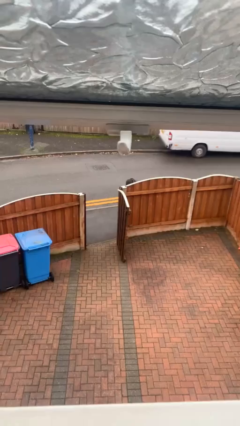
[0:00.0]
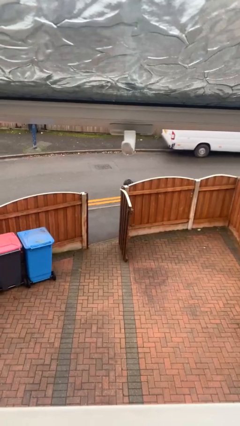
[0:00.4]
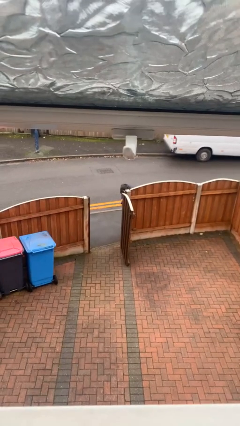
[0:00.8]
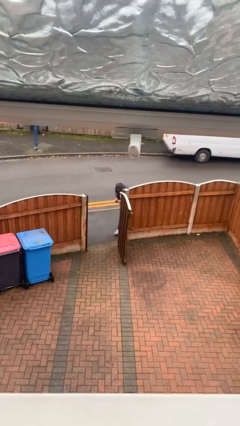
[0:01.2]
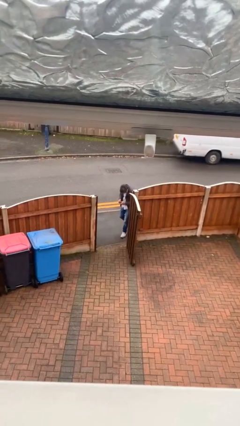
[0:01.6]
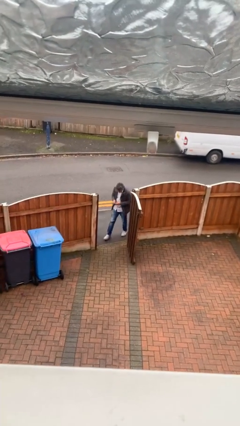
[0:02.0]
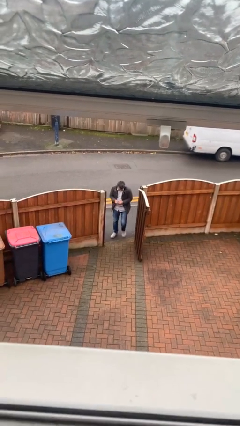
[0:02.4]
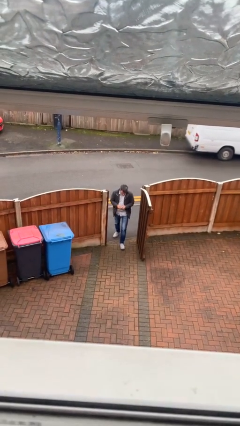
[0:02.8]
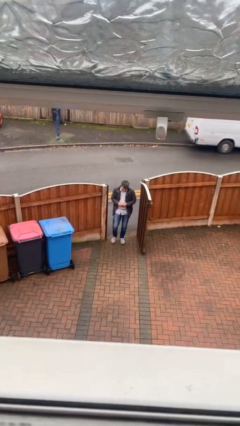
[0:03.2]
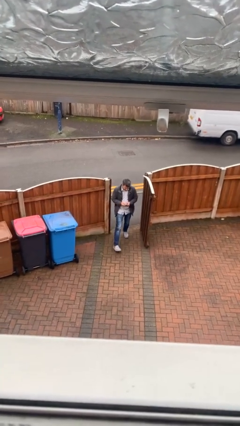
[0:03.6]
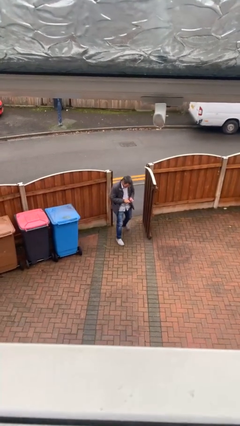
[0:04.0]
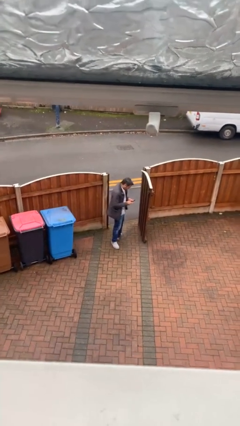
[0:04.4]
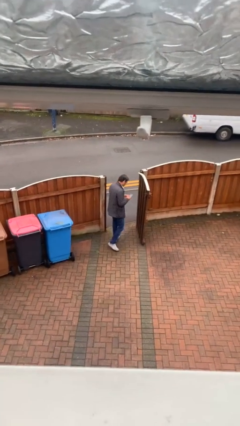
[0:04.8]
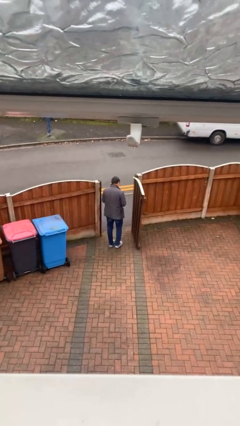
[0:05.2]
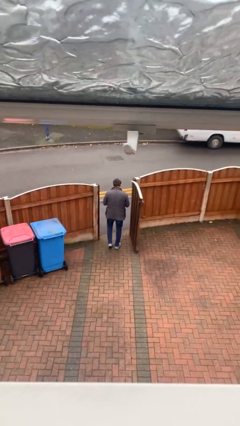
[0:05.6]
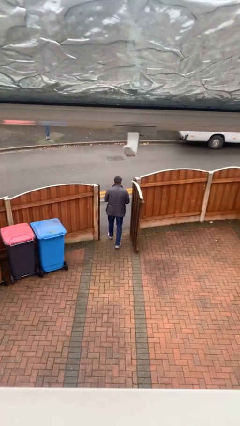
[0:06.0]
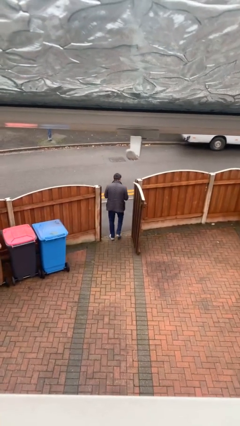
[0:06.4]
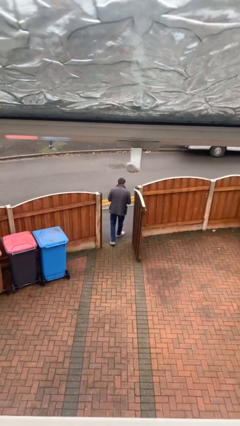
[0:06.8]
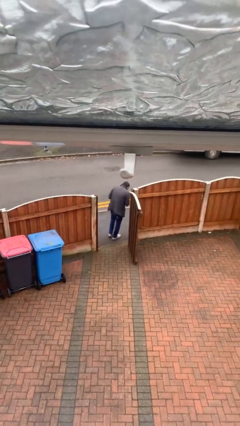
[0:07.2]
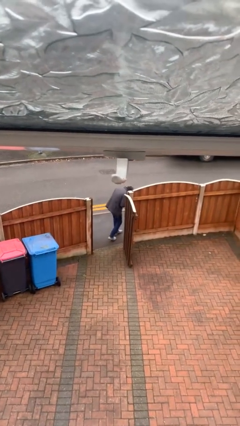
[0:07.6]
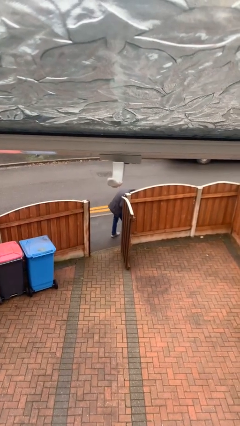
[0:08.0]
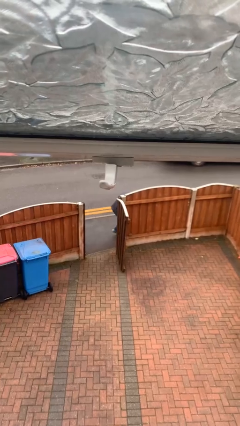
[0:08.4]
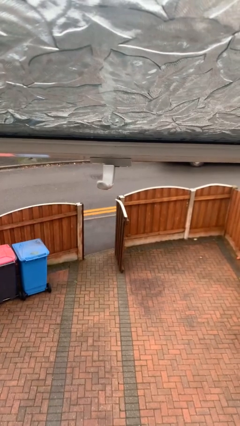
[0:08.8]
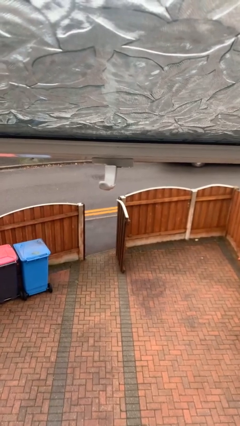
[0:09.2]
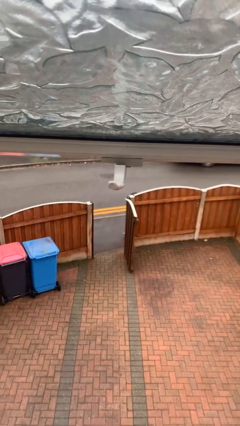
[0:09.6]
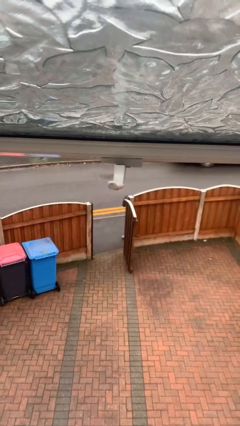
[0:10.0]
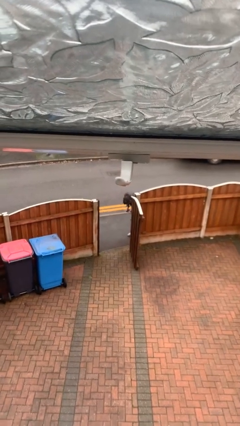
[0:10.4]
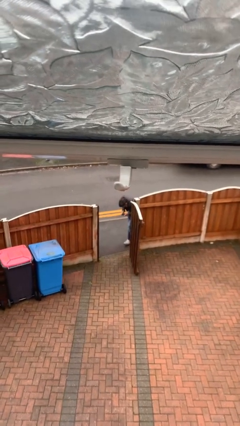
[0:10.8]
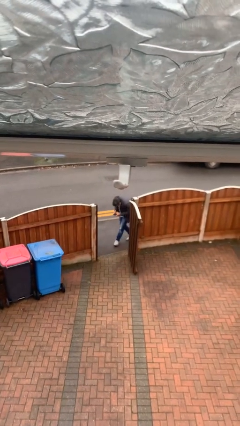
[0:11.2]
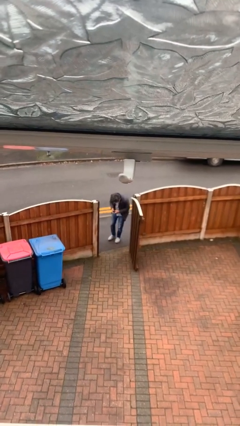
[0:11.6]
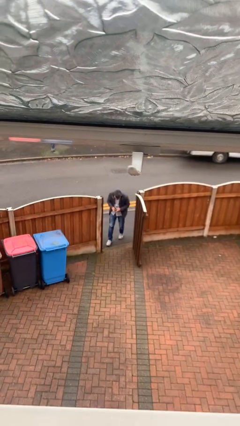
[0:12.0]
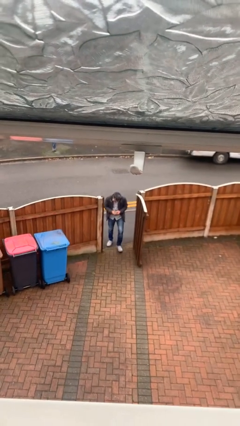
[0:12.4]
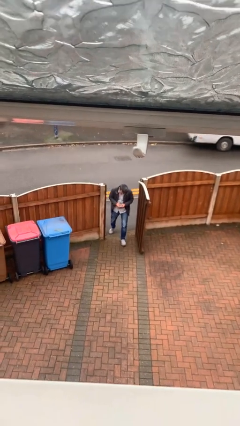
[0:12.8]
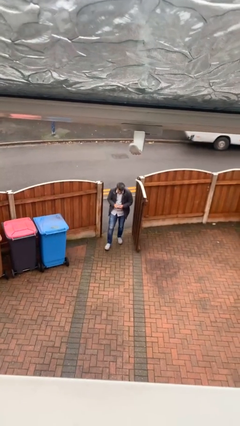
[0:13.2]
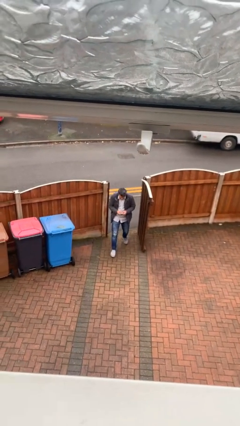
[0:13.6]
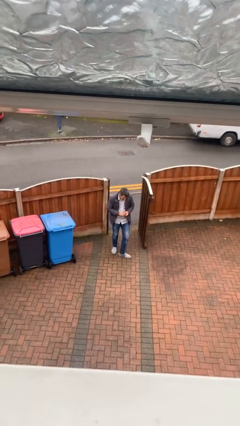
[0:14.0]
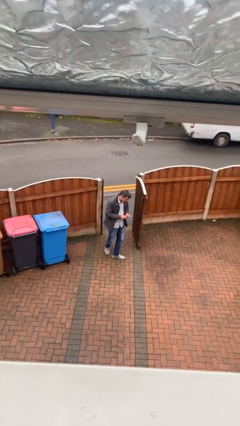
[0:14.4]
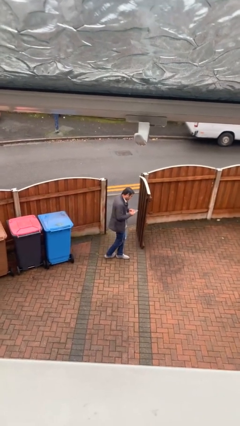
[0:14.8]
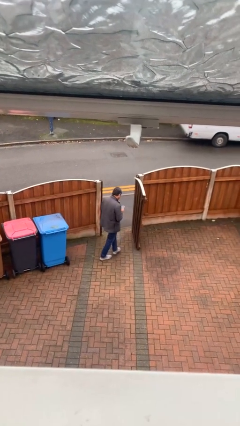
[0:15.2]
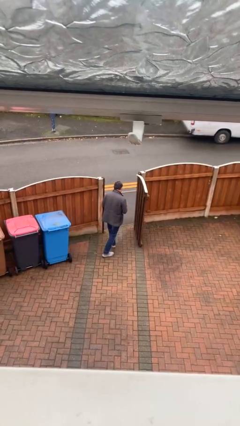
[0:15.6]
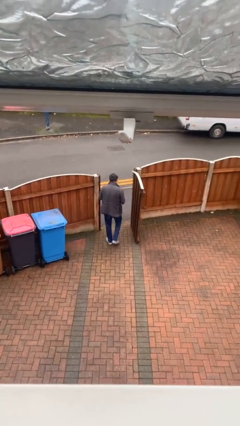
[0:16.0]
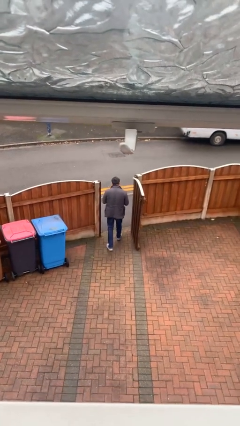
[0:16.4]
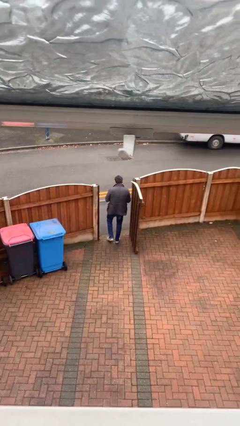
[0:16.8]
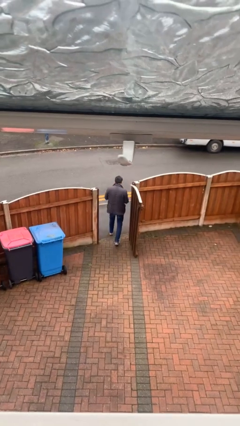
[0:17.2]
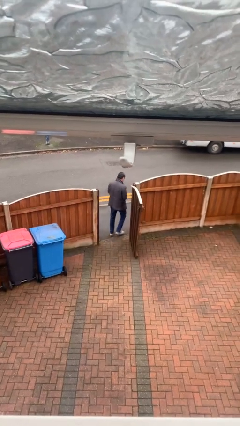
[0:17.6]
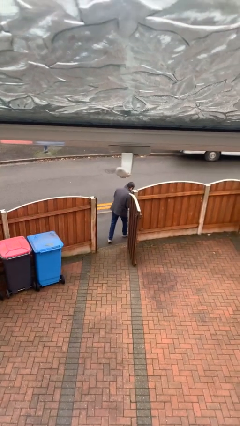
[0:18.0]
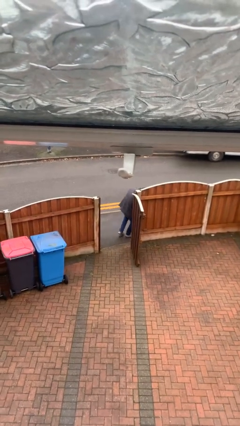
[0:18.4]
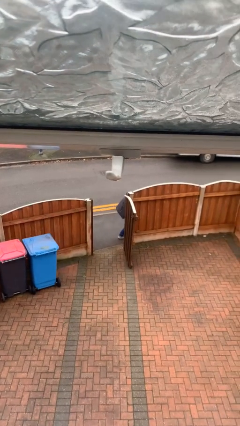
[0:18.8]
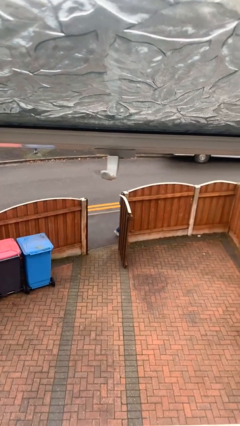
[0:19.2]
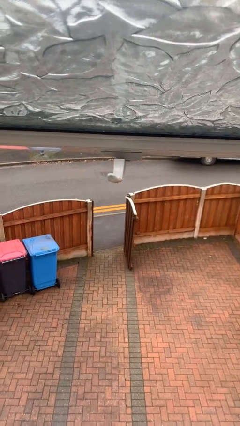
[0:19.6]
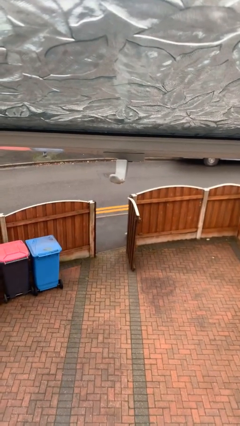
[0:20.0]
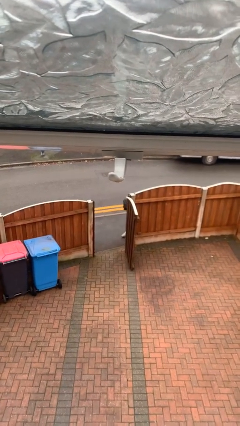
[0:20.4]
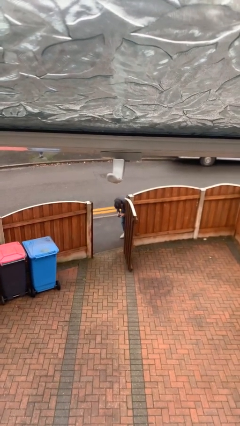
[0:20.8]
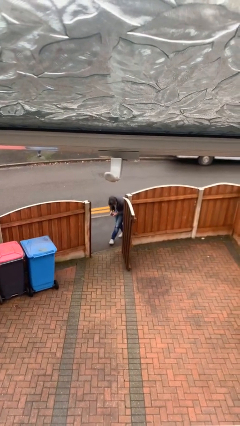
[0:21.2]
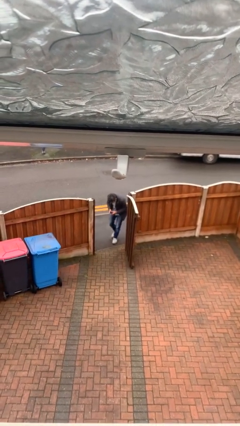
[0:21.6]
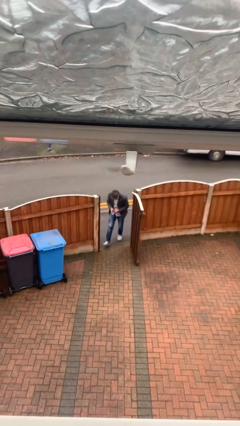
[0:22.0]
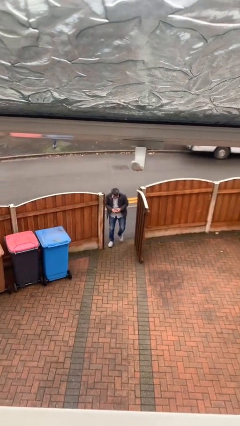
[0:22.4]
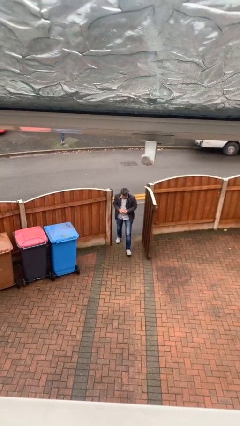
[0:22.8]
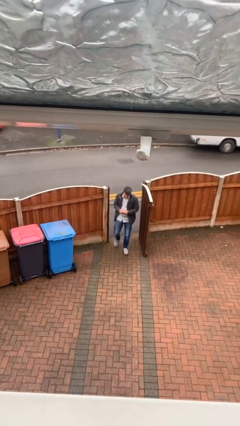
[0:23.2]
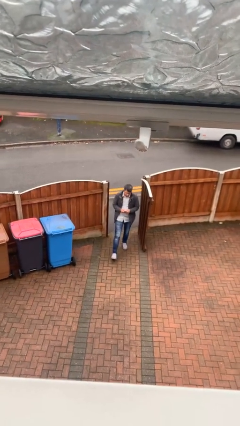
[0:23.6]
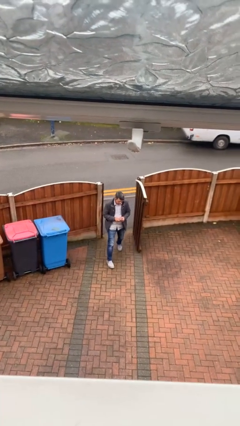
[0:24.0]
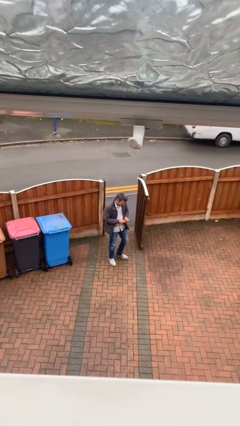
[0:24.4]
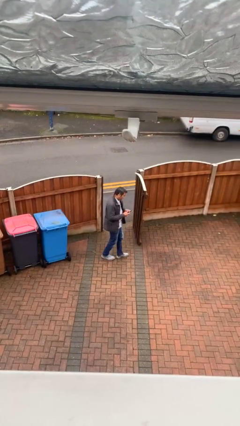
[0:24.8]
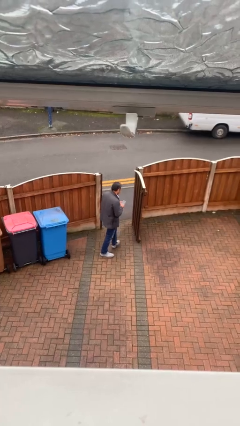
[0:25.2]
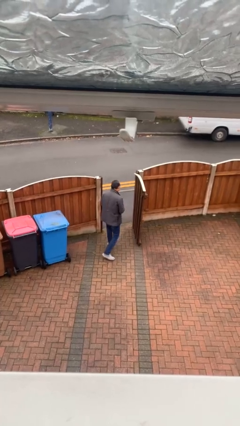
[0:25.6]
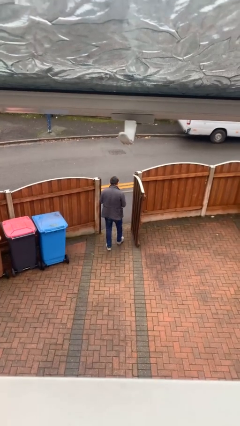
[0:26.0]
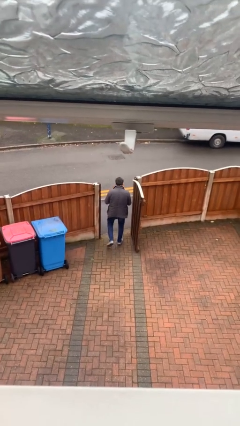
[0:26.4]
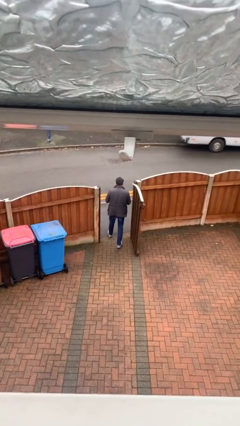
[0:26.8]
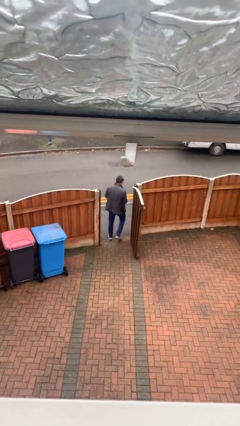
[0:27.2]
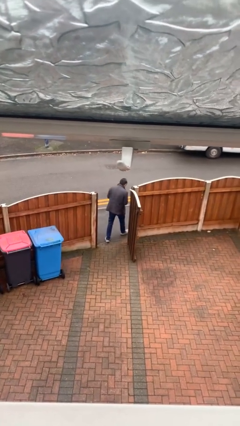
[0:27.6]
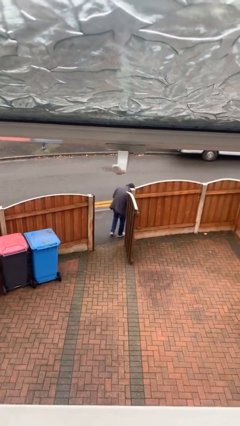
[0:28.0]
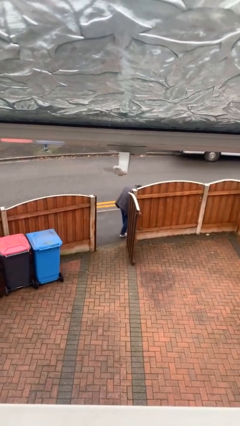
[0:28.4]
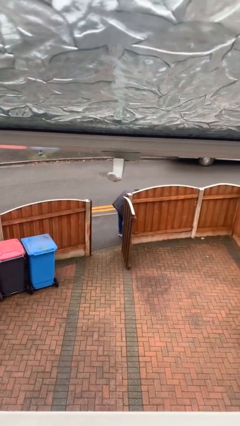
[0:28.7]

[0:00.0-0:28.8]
person texts on phone

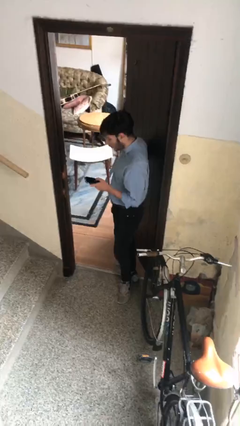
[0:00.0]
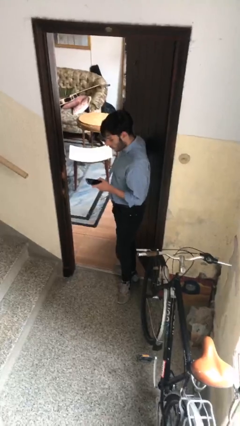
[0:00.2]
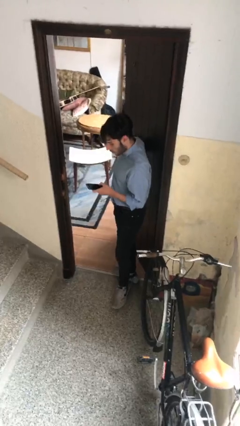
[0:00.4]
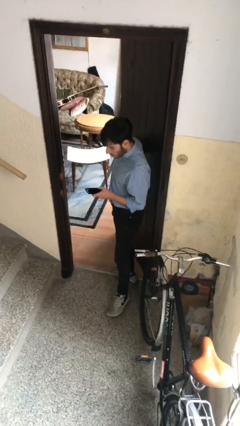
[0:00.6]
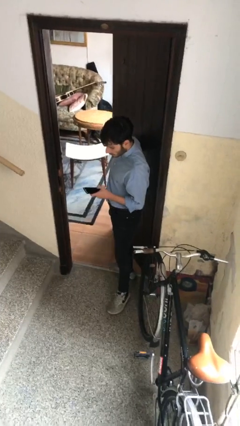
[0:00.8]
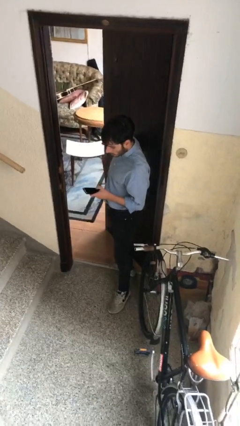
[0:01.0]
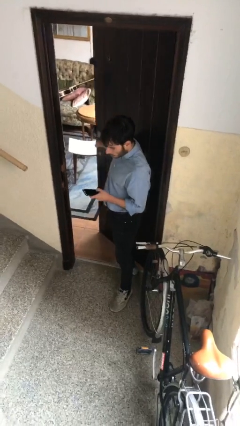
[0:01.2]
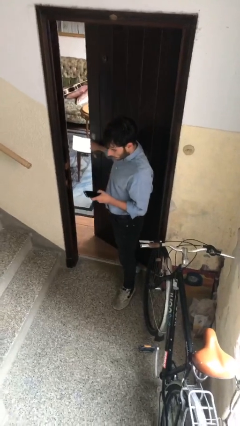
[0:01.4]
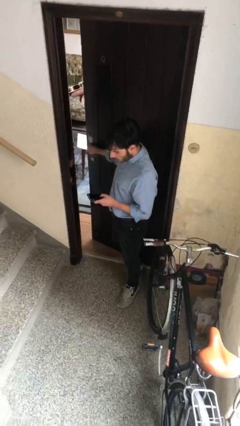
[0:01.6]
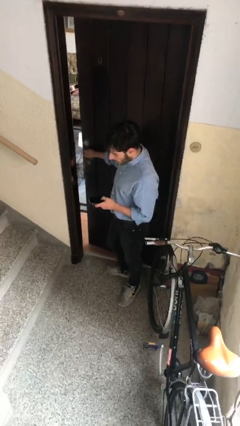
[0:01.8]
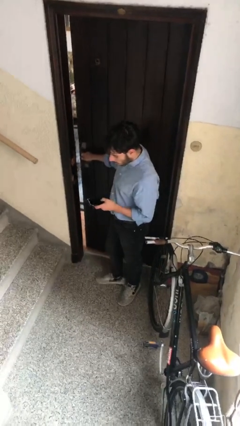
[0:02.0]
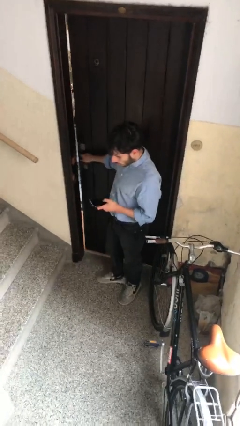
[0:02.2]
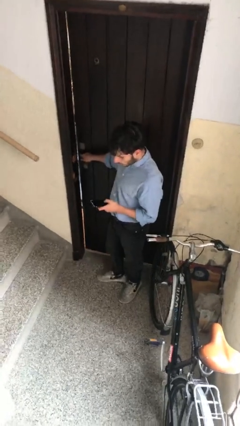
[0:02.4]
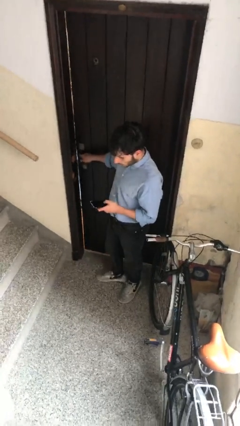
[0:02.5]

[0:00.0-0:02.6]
person closes facility door

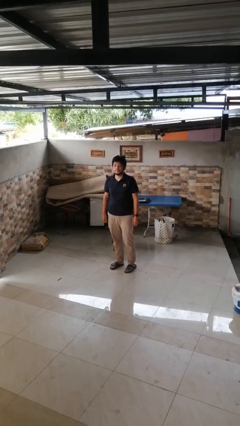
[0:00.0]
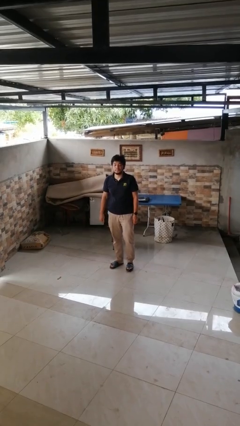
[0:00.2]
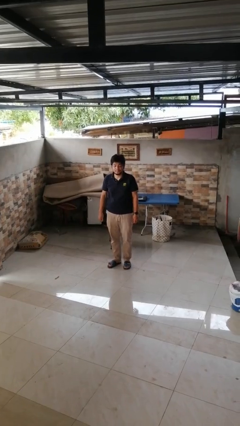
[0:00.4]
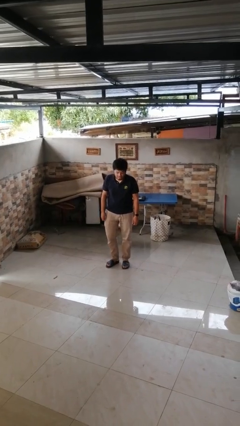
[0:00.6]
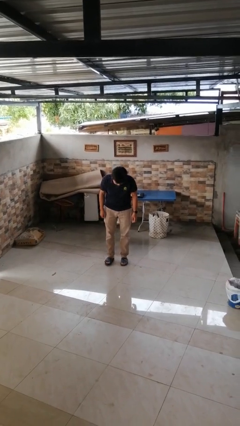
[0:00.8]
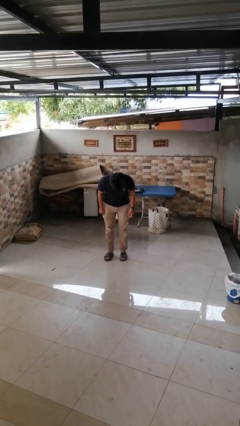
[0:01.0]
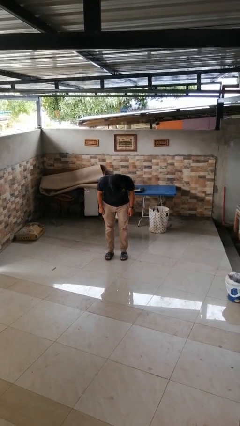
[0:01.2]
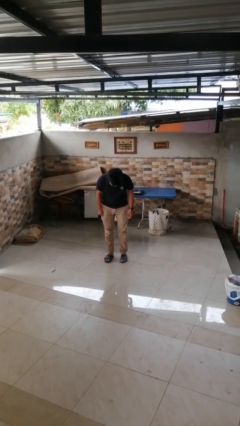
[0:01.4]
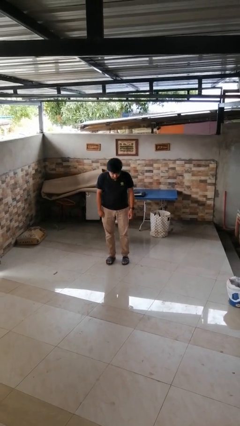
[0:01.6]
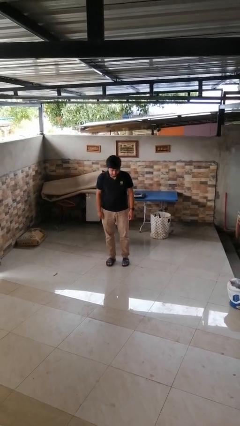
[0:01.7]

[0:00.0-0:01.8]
person bows
